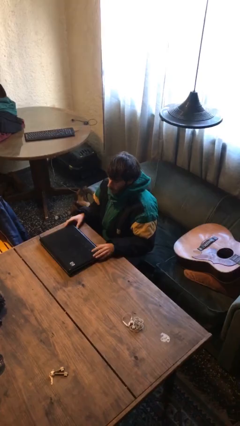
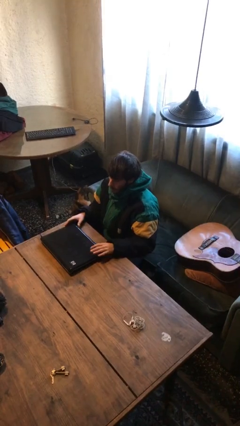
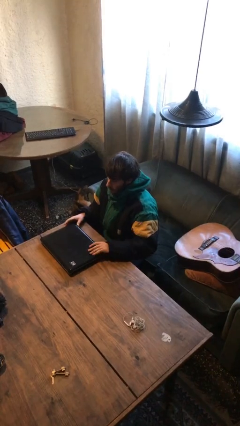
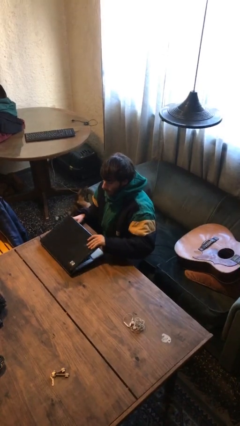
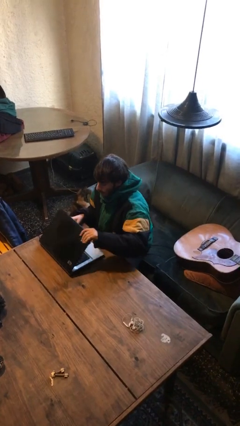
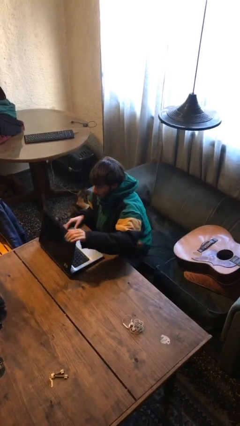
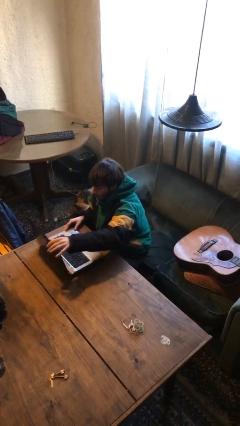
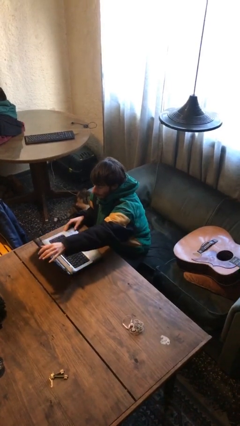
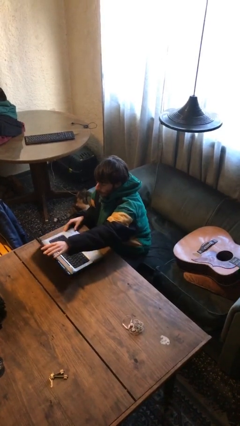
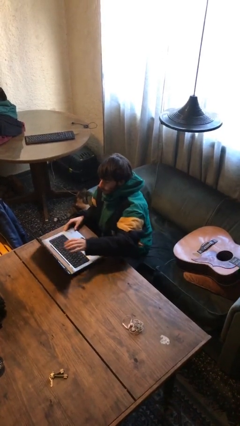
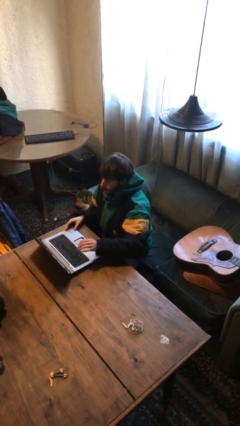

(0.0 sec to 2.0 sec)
person opens laptop

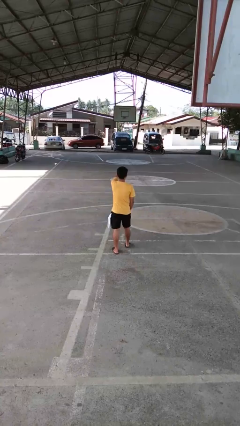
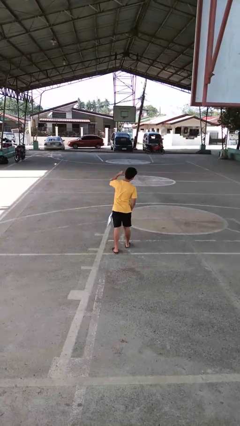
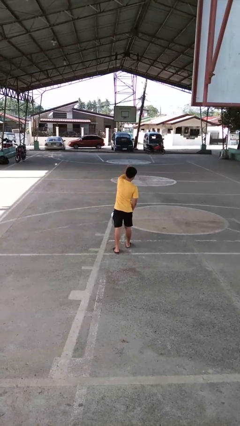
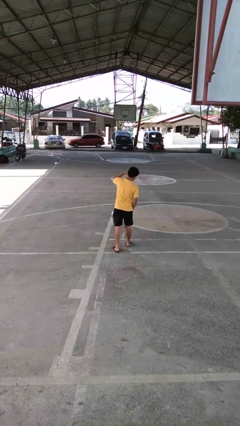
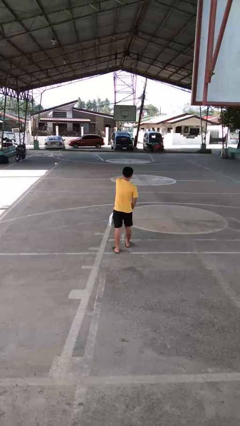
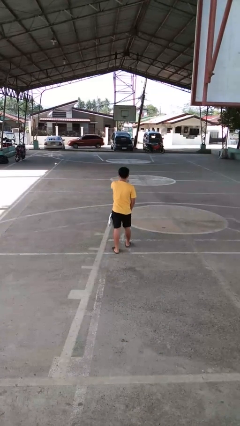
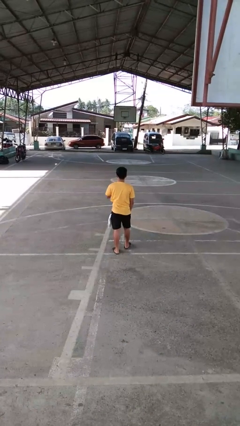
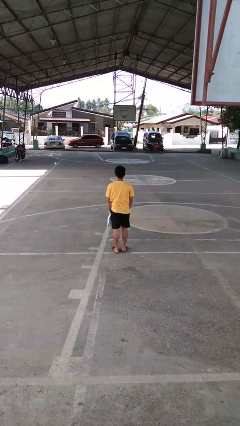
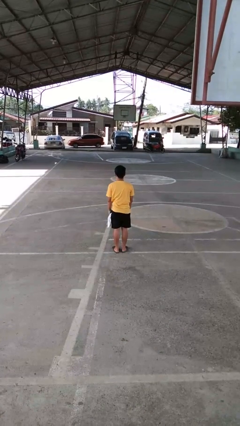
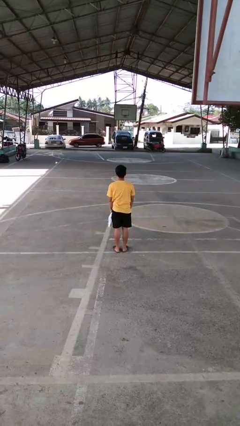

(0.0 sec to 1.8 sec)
person punches

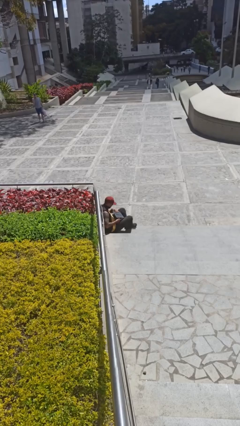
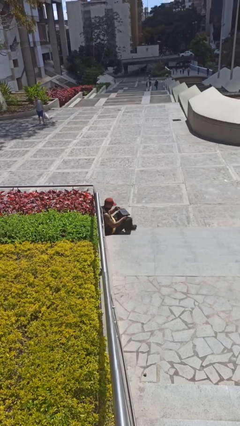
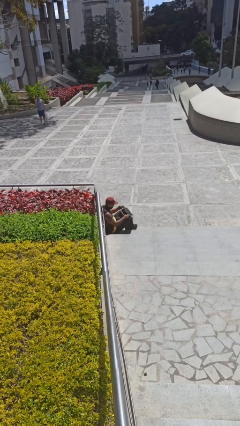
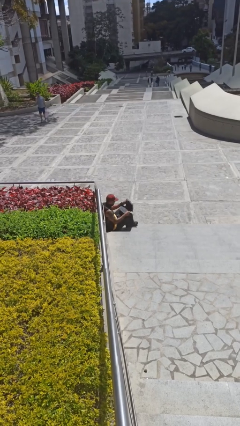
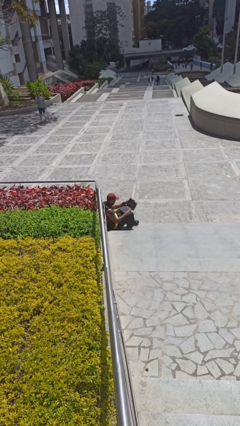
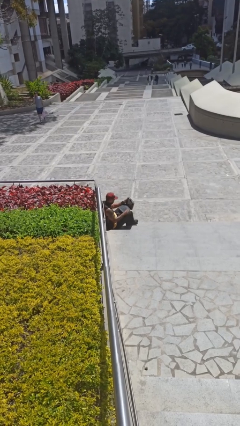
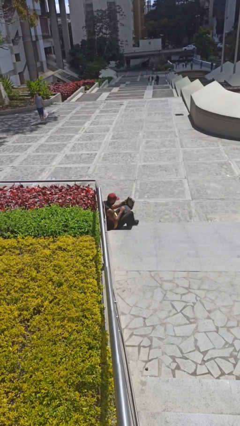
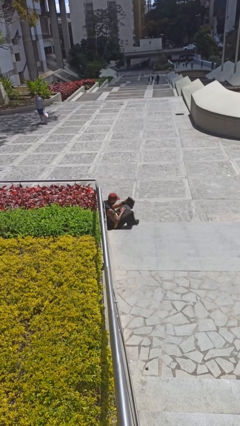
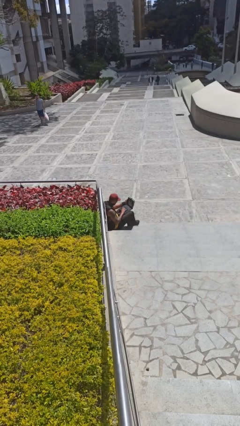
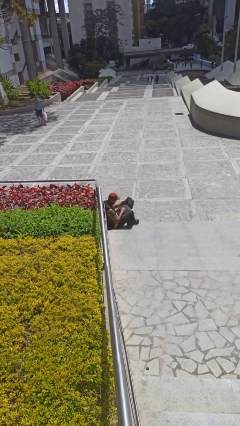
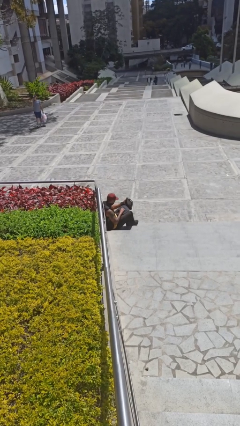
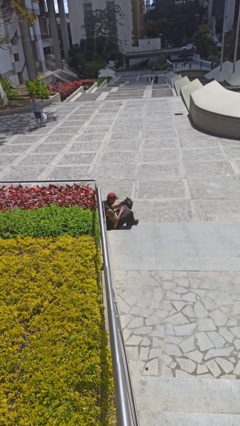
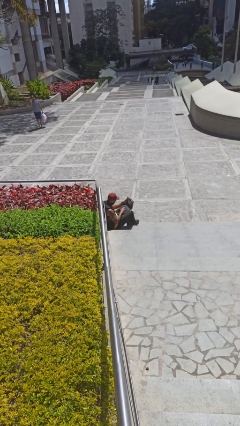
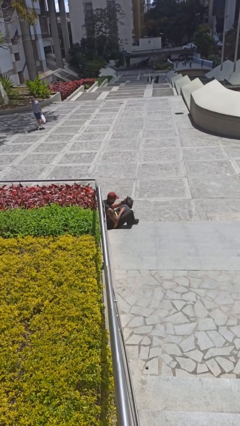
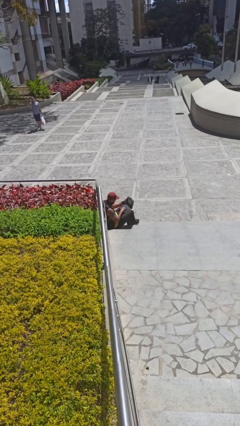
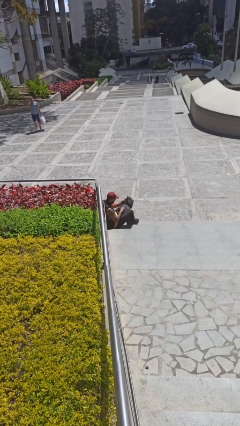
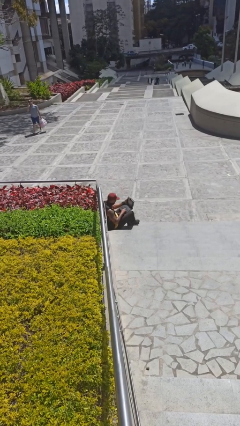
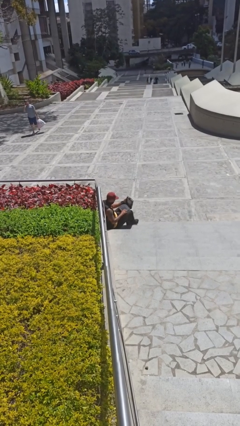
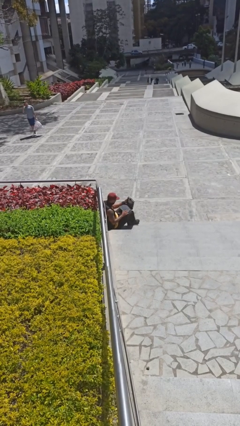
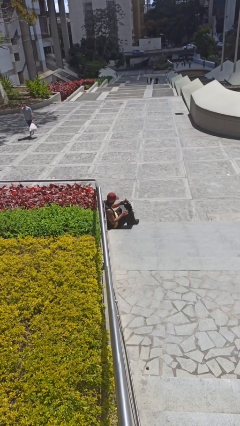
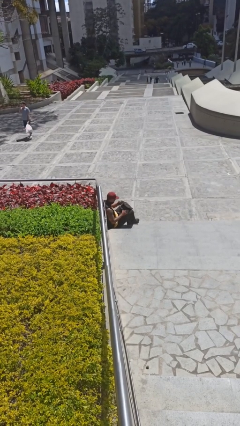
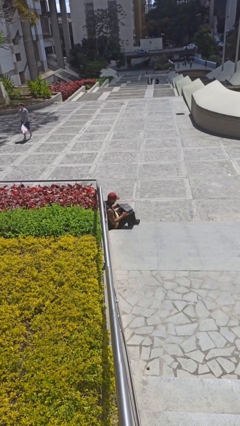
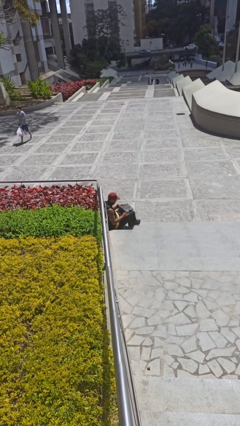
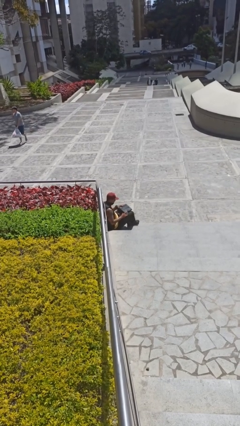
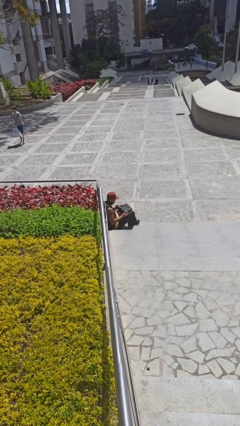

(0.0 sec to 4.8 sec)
person interacts with laptop

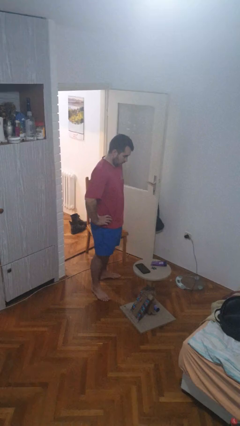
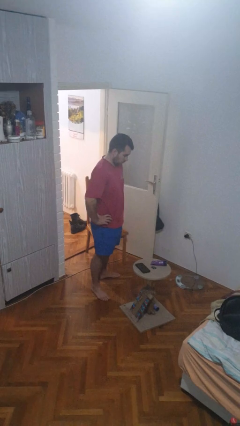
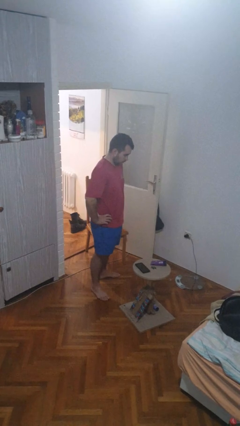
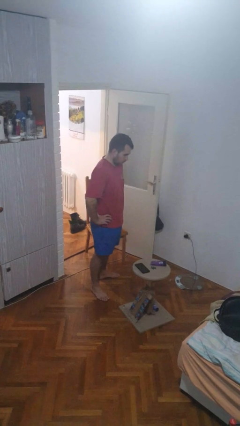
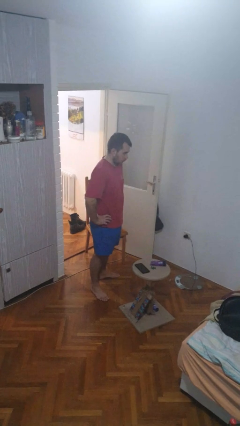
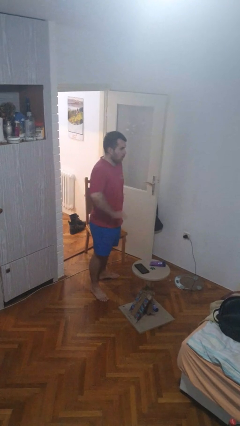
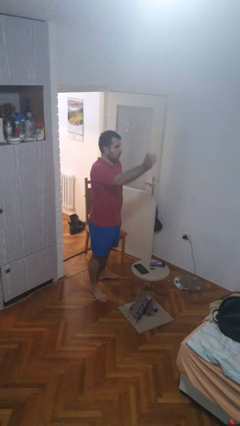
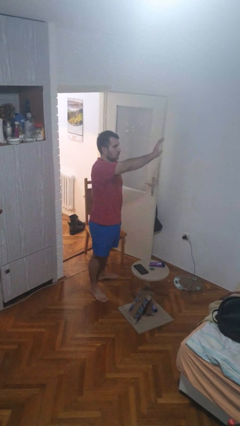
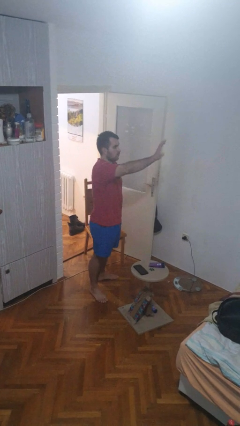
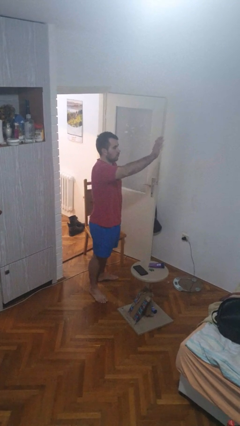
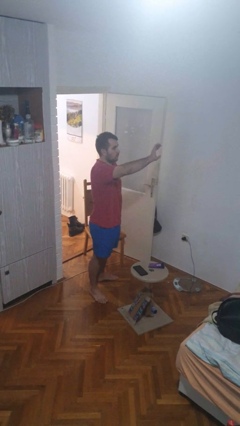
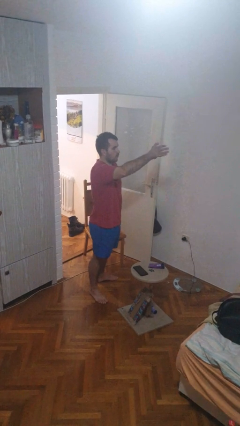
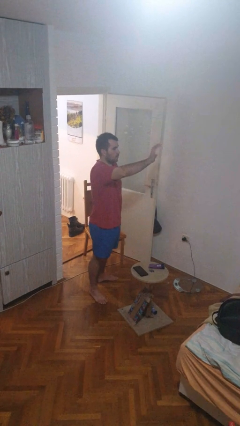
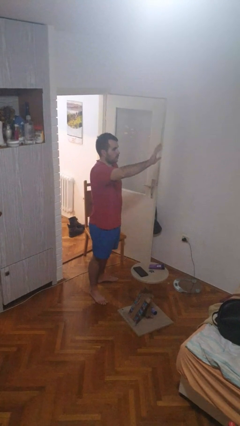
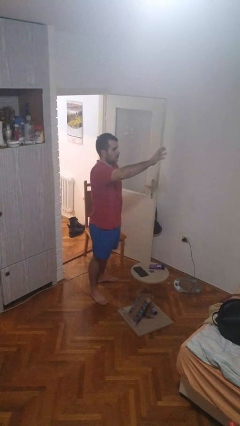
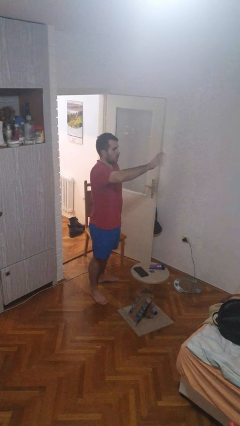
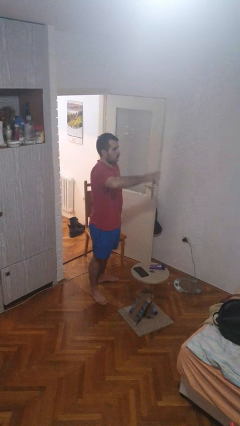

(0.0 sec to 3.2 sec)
person waves at person

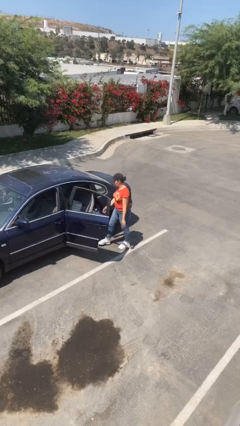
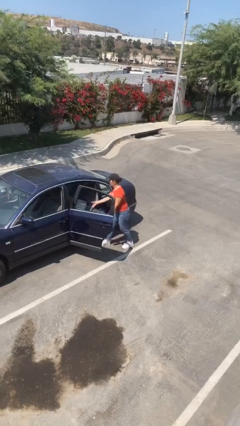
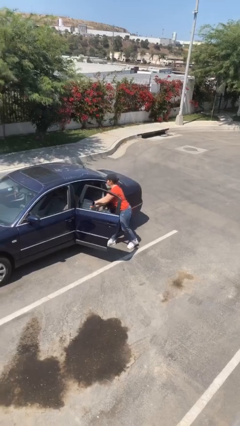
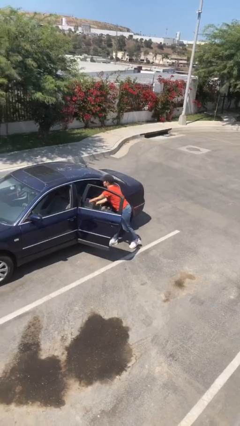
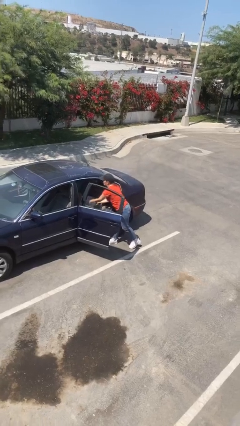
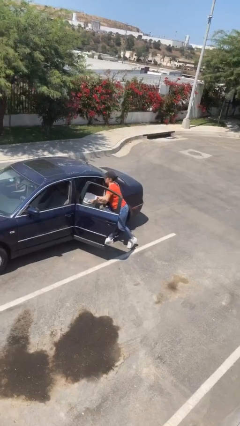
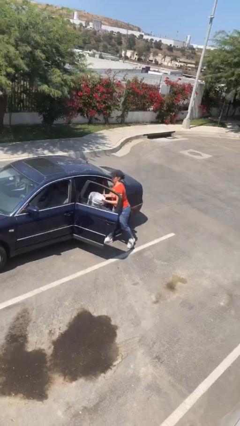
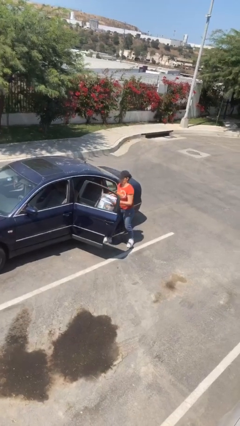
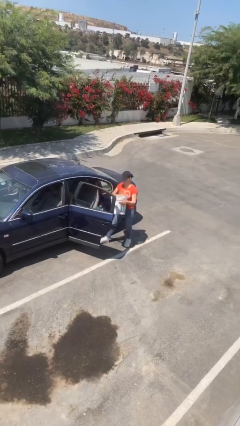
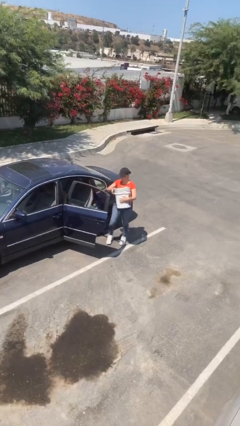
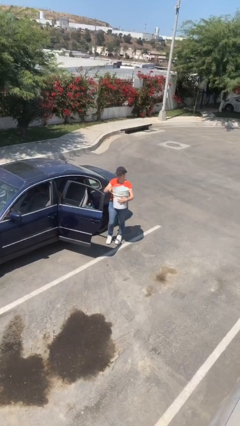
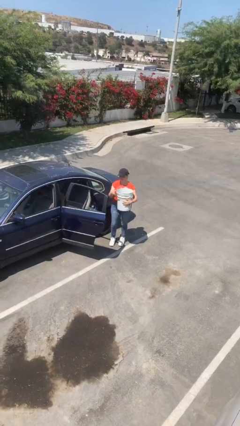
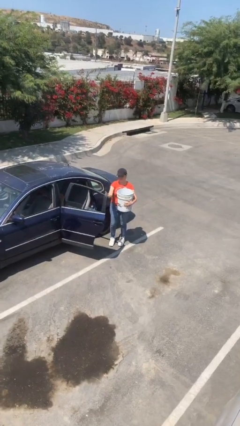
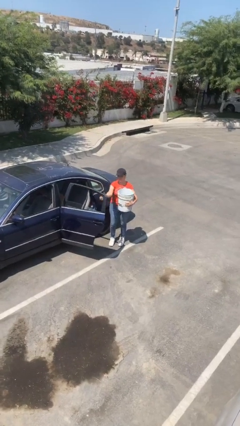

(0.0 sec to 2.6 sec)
person unloads car

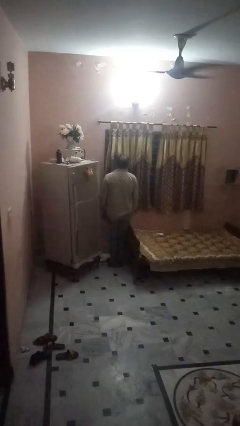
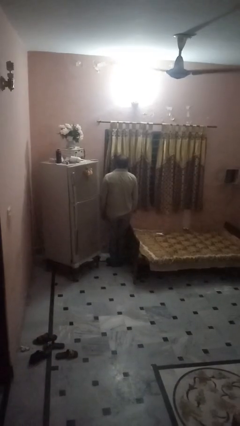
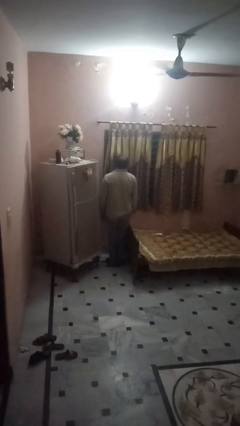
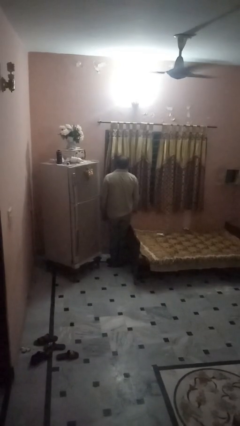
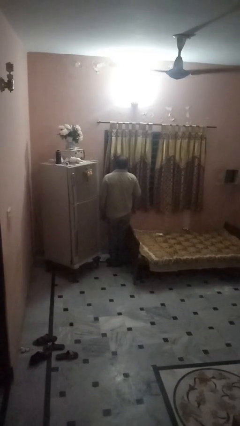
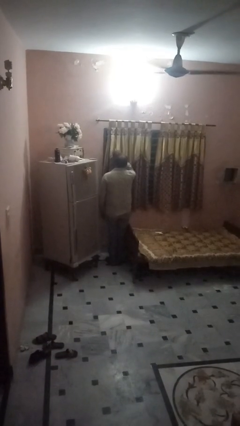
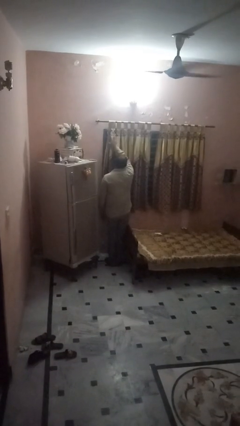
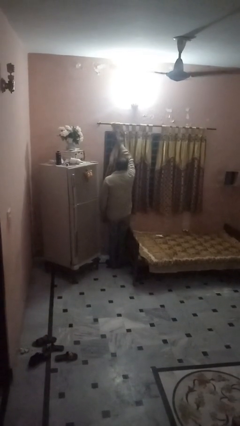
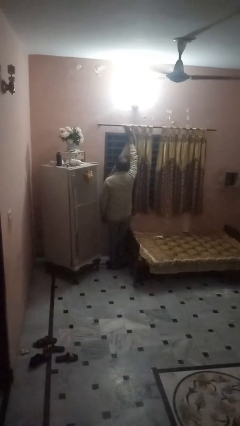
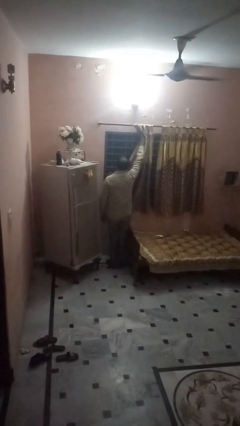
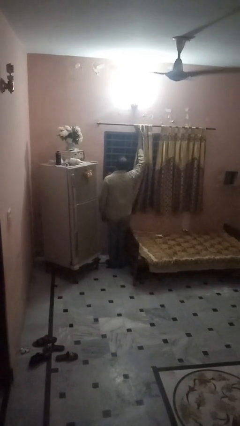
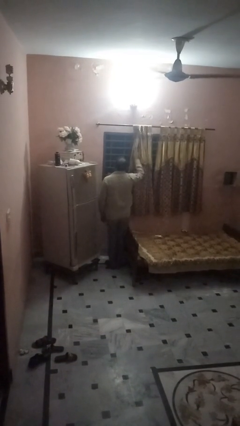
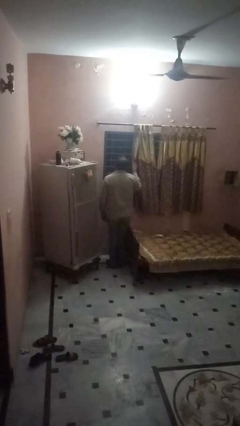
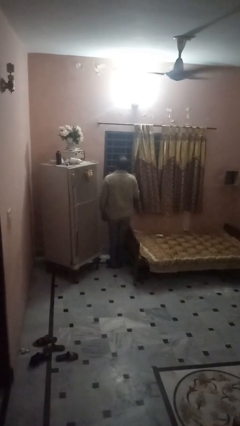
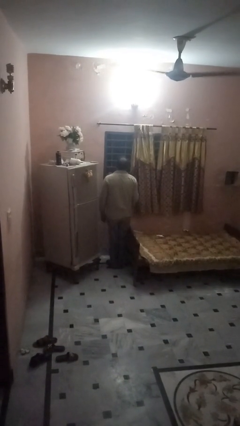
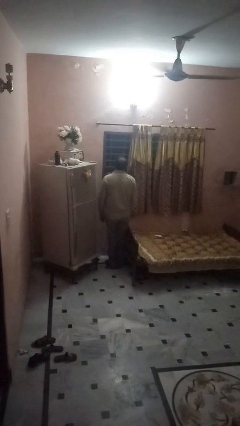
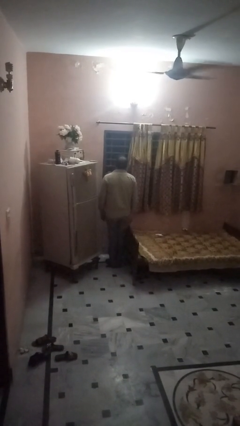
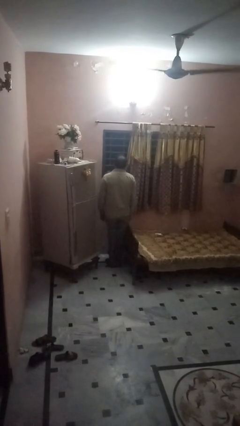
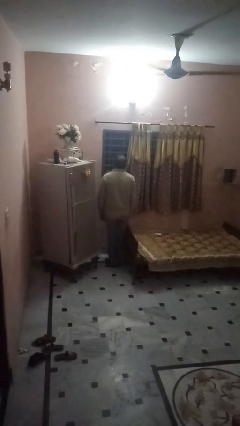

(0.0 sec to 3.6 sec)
person opens curtains
